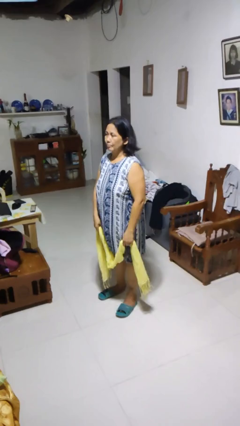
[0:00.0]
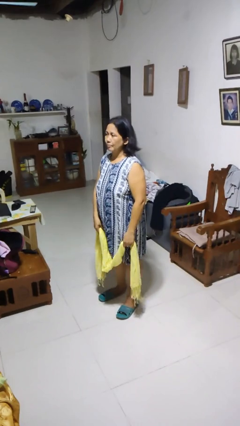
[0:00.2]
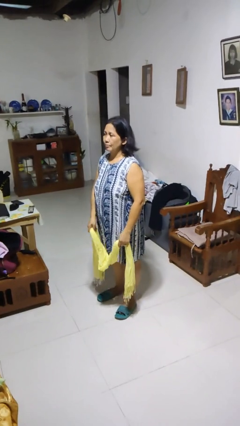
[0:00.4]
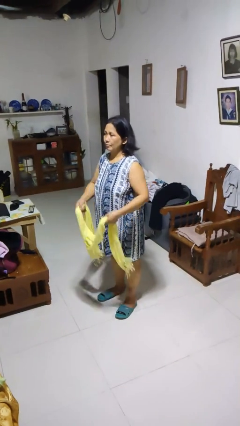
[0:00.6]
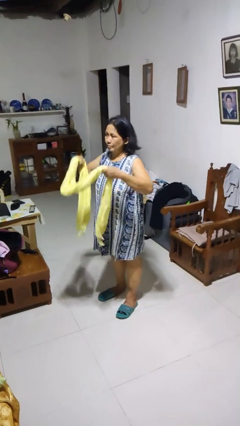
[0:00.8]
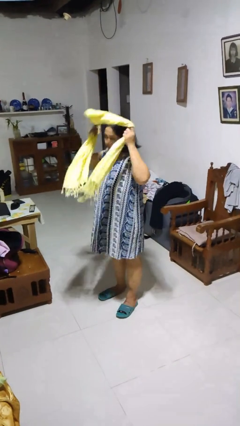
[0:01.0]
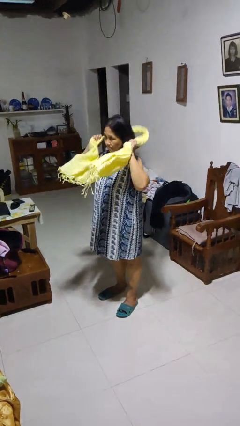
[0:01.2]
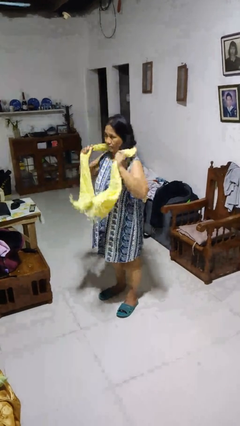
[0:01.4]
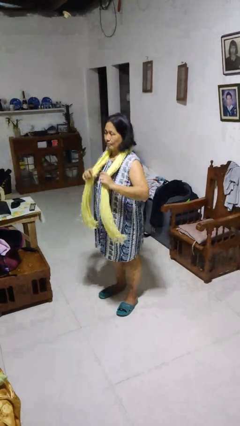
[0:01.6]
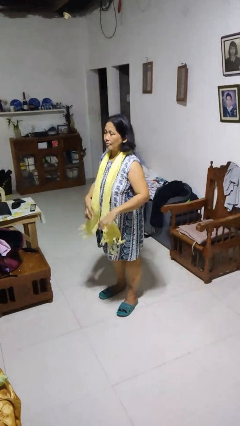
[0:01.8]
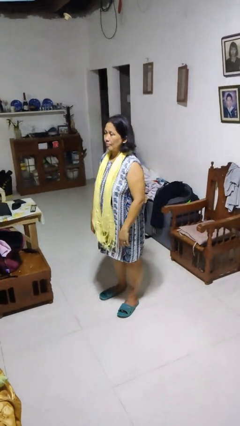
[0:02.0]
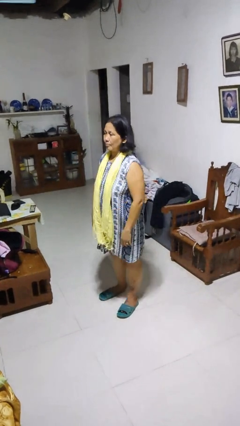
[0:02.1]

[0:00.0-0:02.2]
person puts on scarf

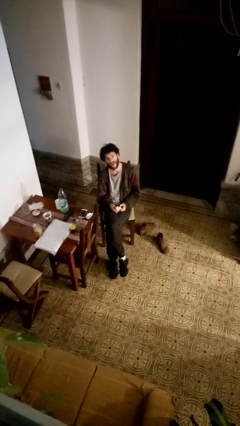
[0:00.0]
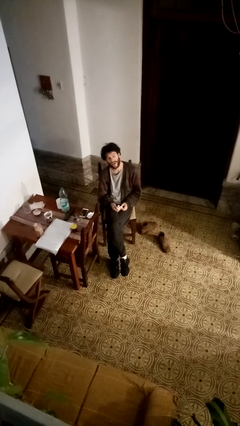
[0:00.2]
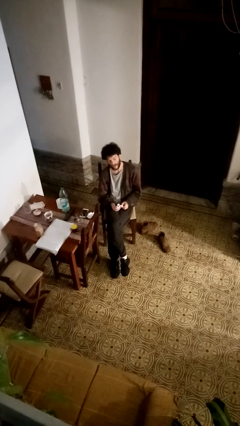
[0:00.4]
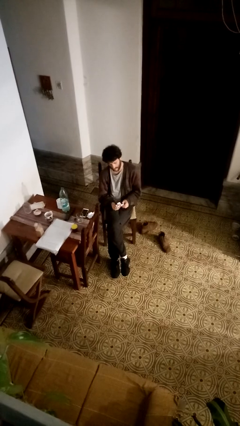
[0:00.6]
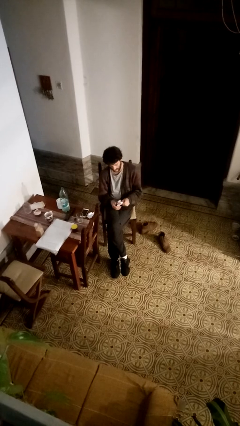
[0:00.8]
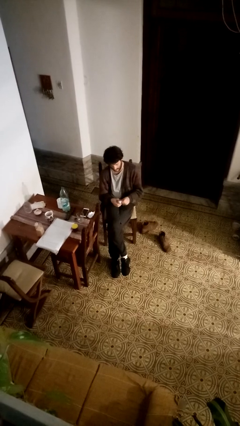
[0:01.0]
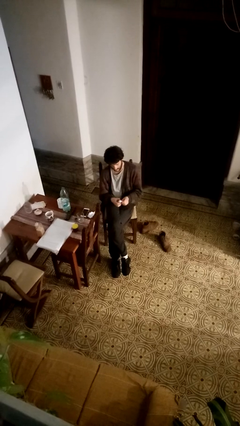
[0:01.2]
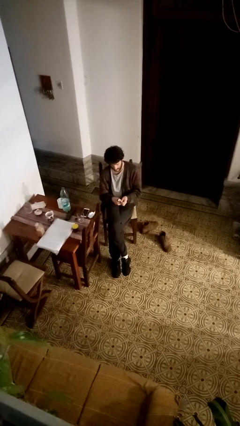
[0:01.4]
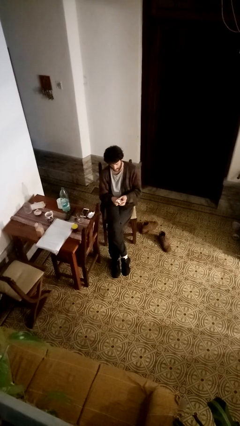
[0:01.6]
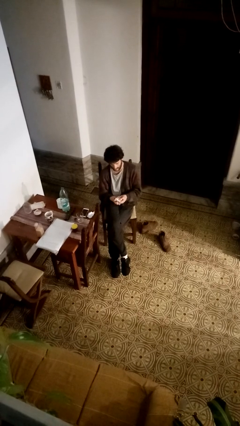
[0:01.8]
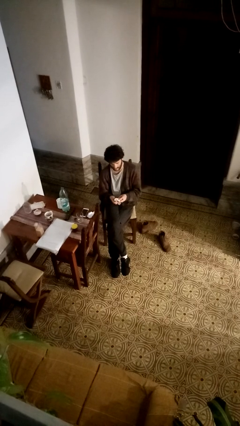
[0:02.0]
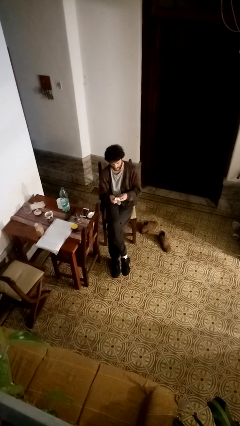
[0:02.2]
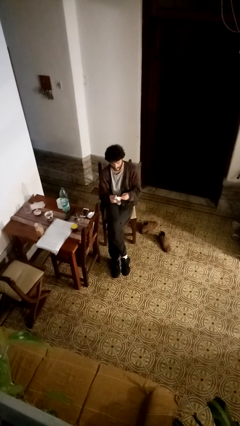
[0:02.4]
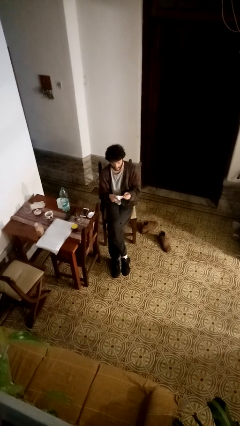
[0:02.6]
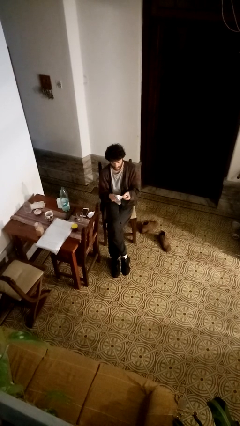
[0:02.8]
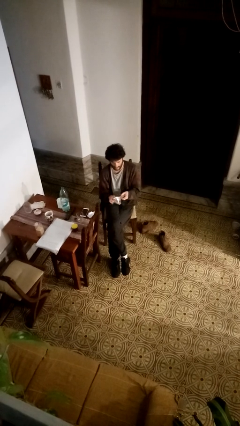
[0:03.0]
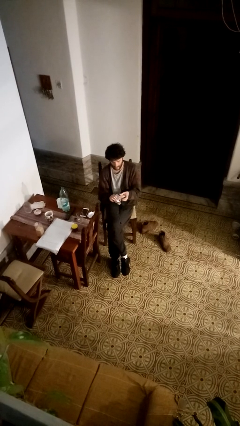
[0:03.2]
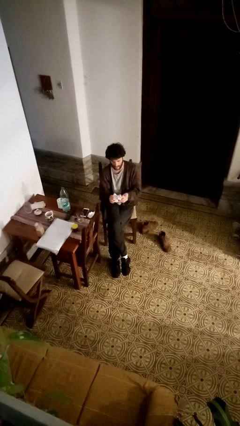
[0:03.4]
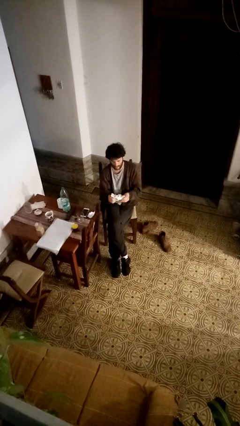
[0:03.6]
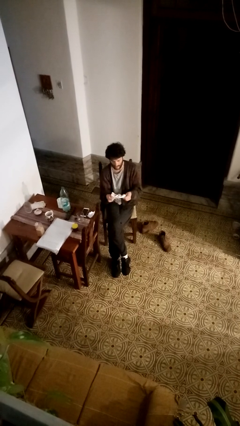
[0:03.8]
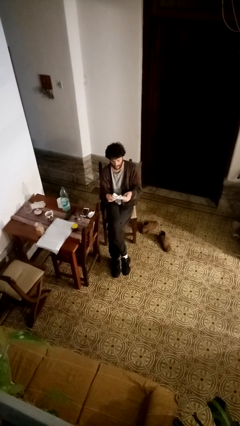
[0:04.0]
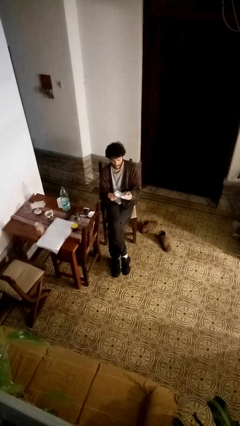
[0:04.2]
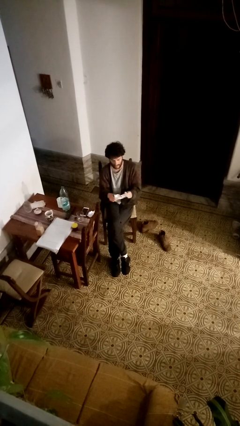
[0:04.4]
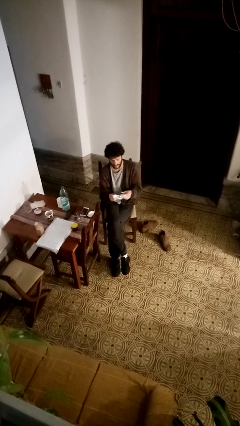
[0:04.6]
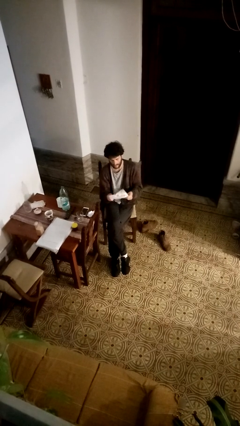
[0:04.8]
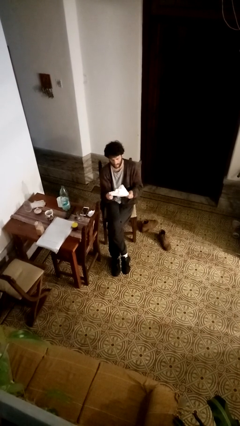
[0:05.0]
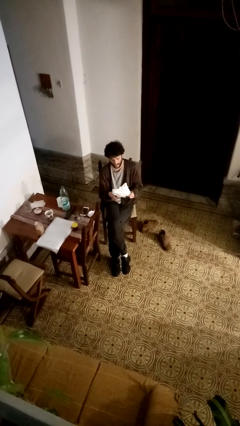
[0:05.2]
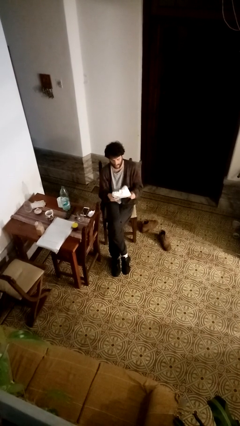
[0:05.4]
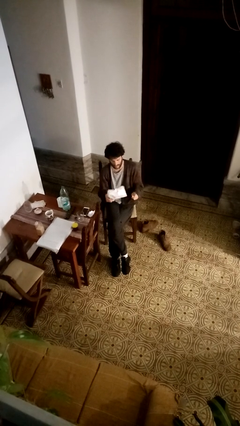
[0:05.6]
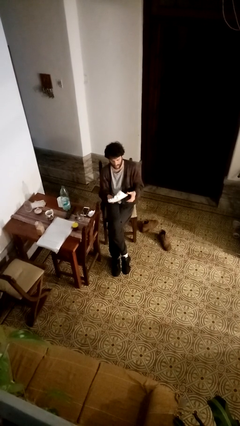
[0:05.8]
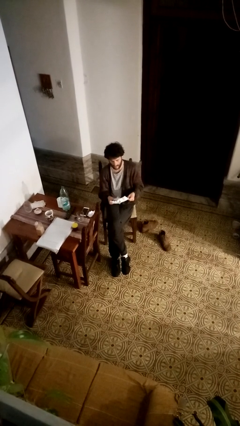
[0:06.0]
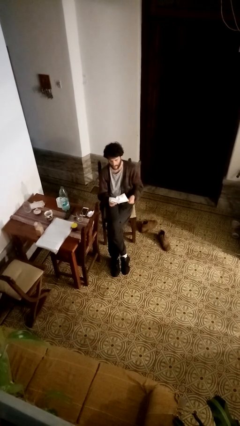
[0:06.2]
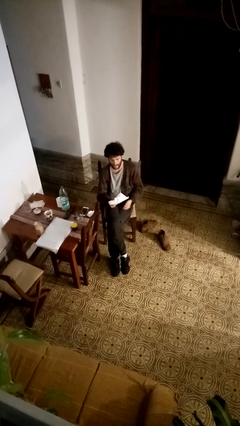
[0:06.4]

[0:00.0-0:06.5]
person crumples paper

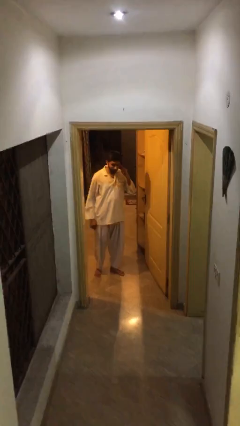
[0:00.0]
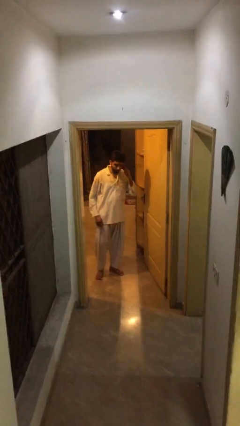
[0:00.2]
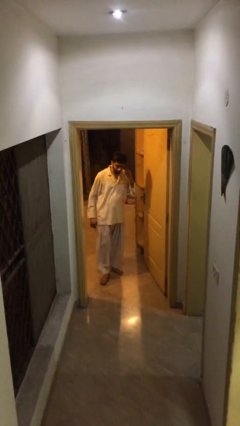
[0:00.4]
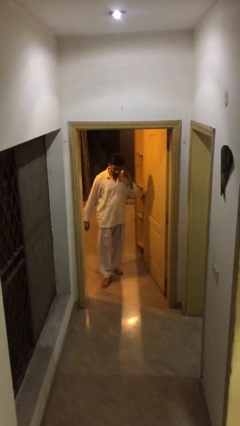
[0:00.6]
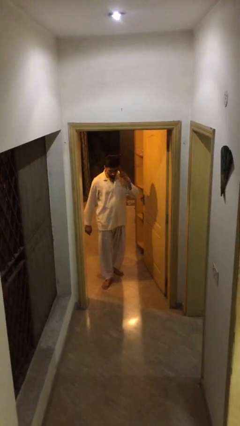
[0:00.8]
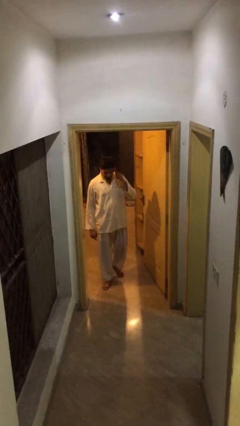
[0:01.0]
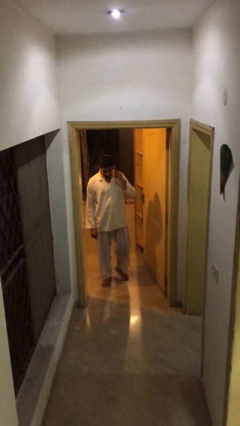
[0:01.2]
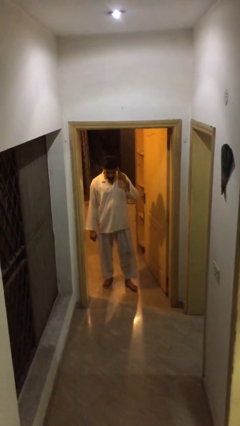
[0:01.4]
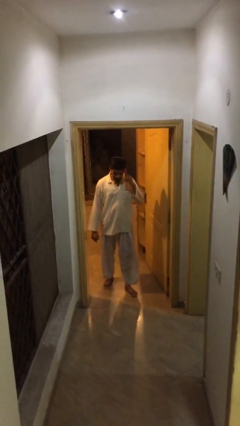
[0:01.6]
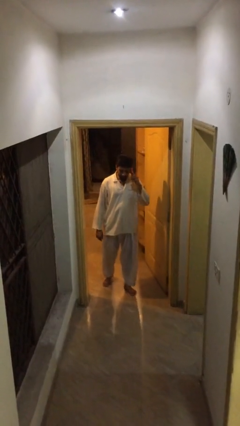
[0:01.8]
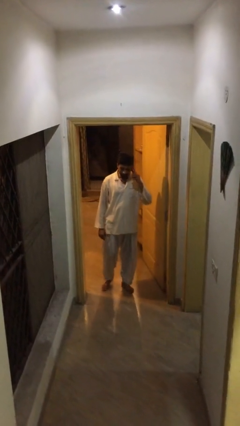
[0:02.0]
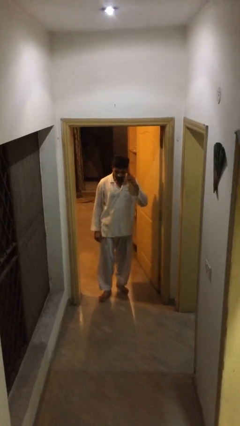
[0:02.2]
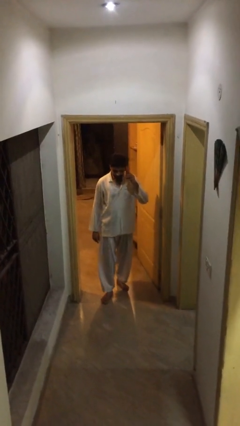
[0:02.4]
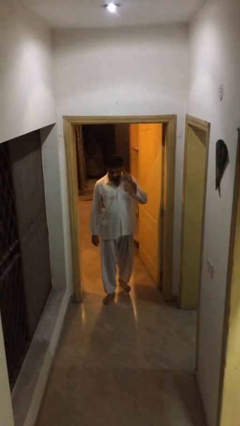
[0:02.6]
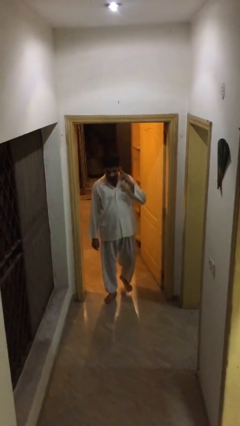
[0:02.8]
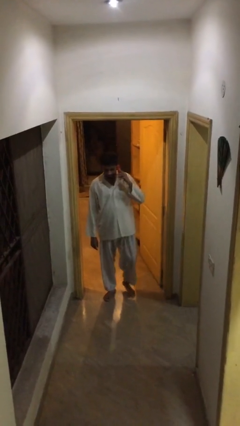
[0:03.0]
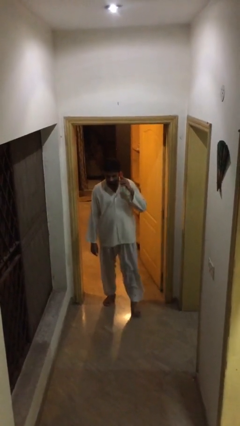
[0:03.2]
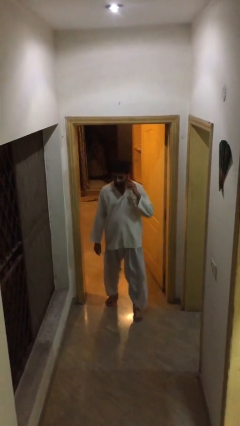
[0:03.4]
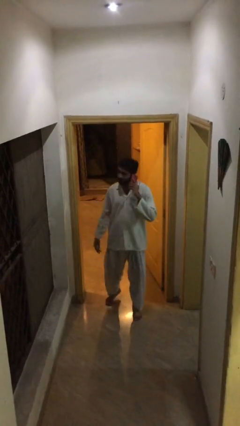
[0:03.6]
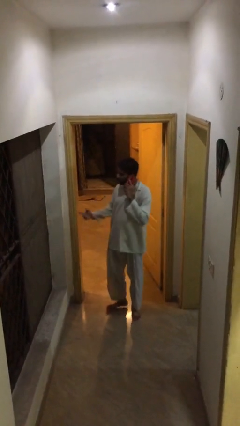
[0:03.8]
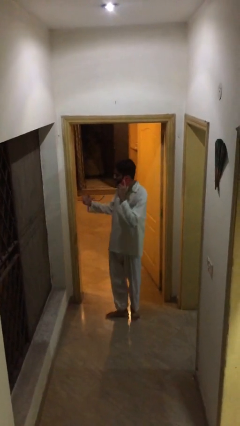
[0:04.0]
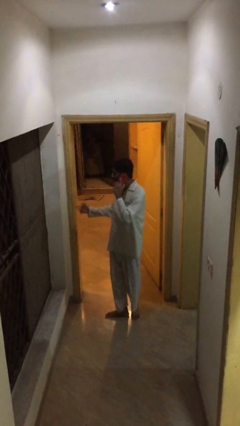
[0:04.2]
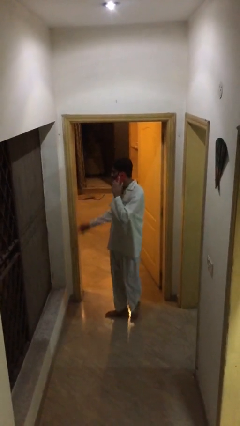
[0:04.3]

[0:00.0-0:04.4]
person enters scene through structure

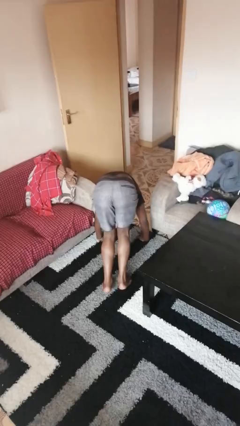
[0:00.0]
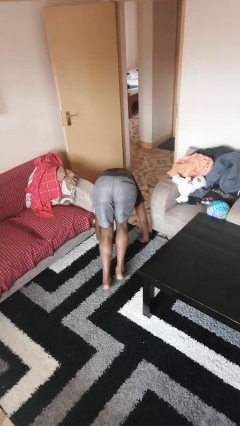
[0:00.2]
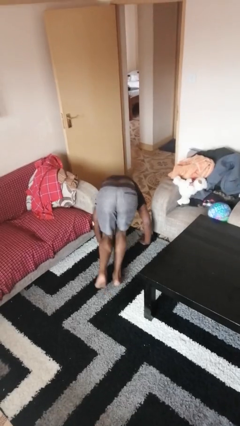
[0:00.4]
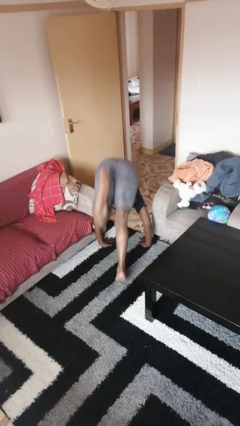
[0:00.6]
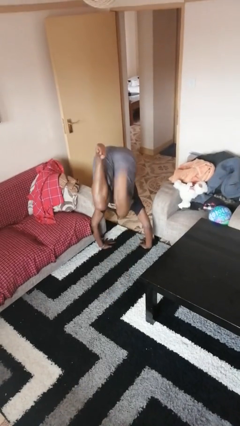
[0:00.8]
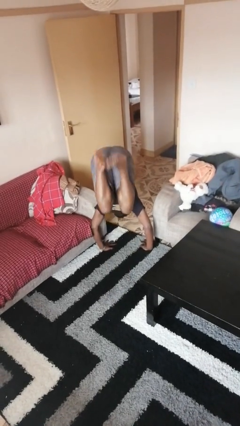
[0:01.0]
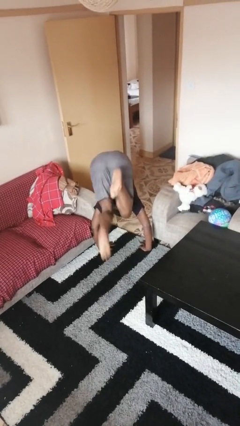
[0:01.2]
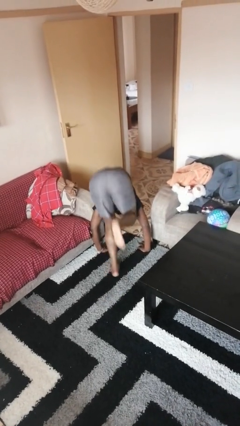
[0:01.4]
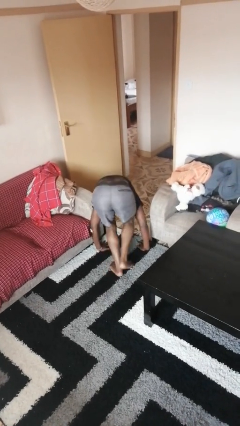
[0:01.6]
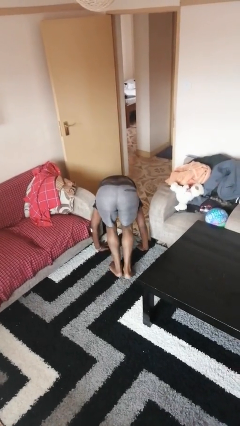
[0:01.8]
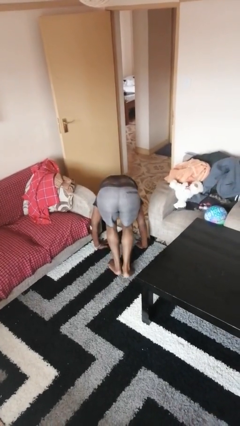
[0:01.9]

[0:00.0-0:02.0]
person handstand

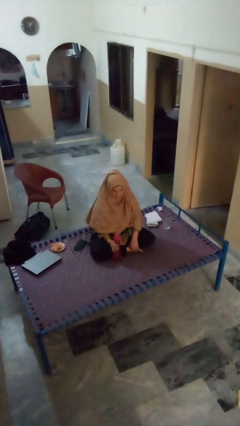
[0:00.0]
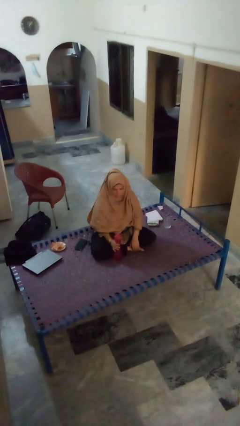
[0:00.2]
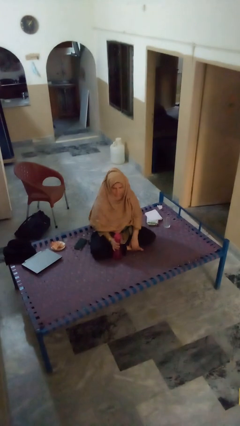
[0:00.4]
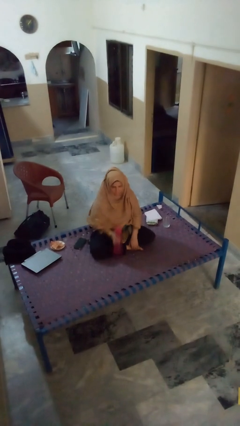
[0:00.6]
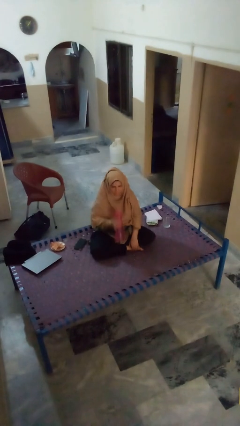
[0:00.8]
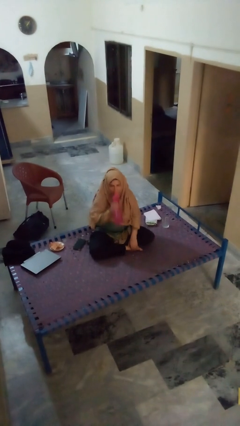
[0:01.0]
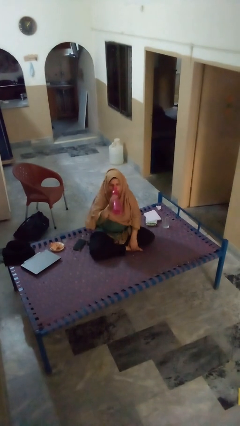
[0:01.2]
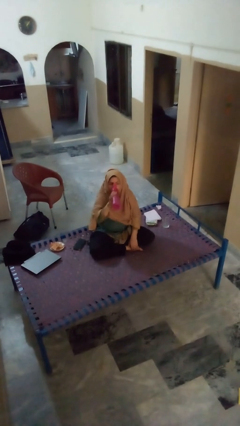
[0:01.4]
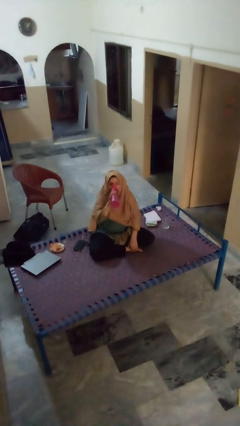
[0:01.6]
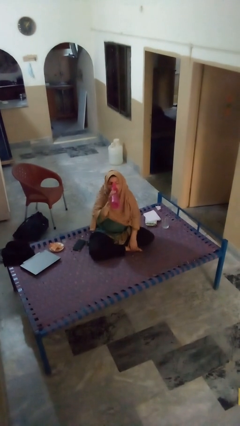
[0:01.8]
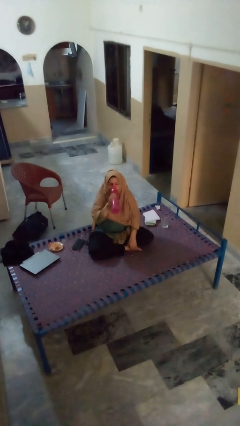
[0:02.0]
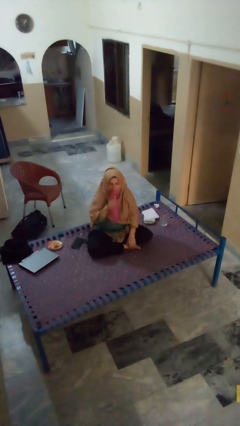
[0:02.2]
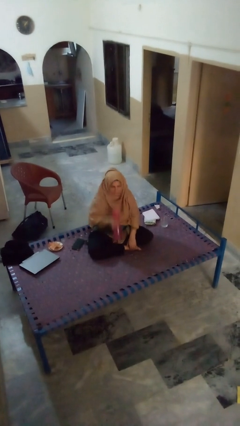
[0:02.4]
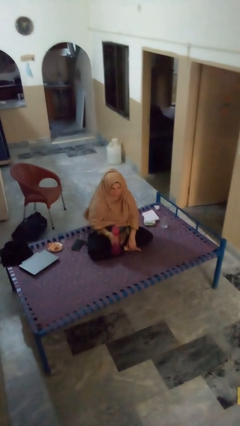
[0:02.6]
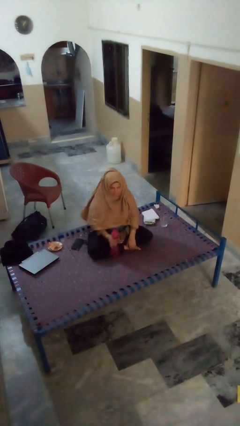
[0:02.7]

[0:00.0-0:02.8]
person drinks from bottle
